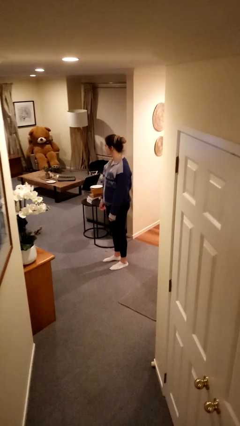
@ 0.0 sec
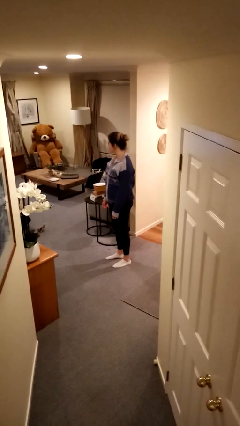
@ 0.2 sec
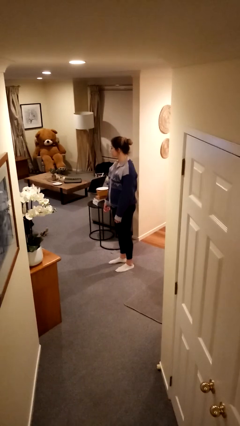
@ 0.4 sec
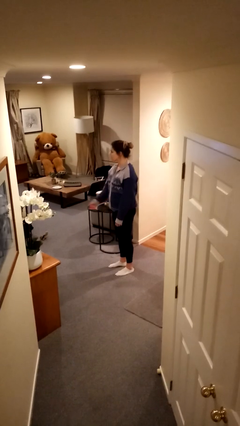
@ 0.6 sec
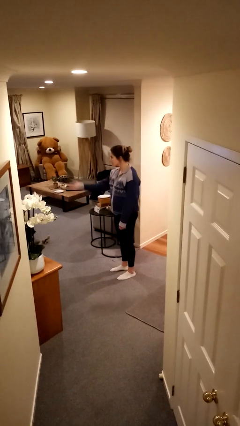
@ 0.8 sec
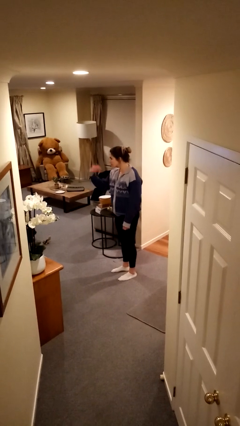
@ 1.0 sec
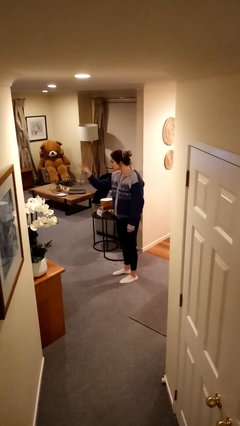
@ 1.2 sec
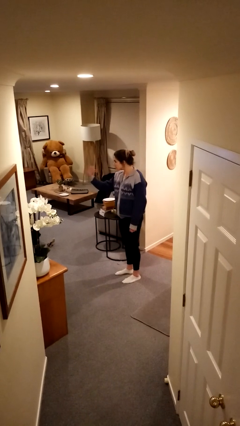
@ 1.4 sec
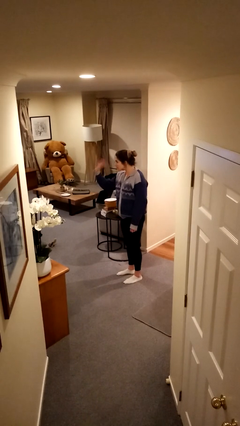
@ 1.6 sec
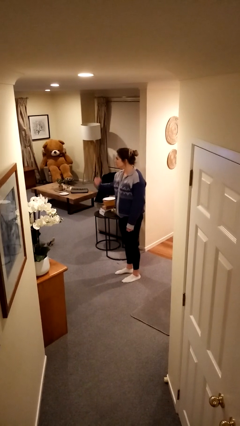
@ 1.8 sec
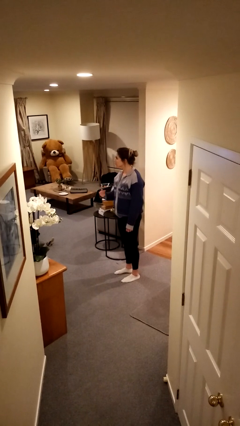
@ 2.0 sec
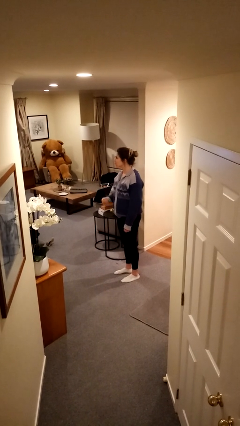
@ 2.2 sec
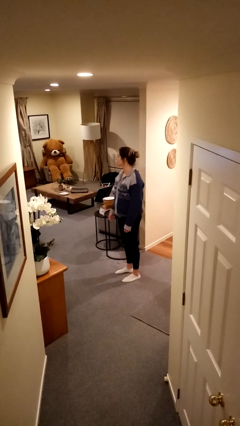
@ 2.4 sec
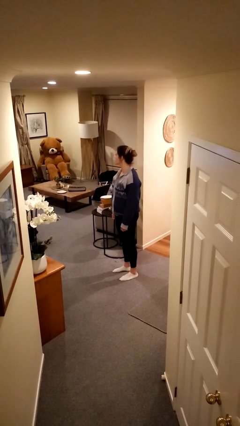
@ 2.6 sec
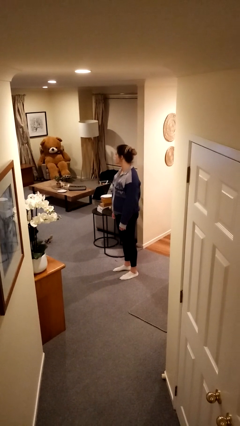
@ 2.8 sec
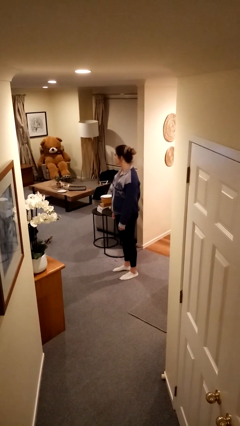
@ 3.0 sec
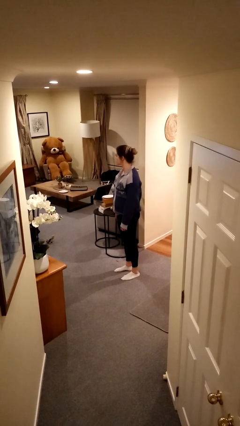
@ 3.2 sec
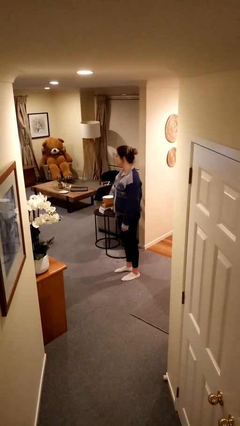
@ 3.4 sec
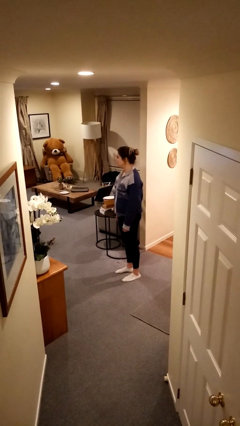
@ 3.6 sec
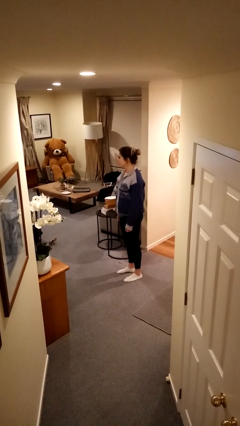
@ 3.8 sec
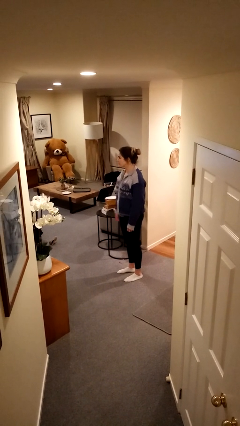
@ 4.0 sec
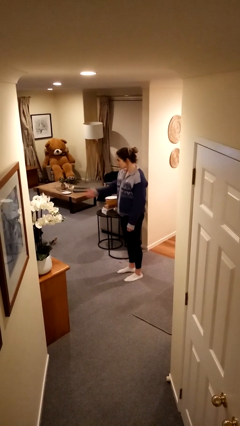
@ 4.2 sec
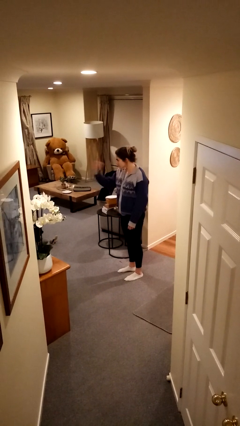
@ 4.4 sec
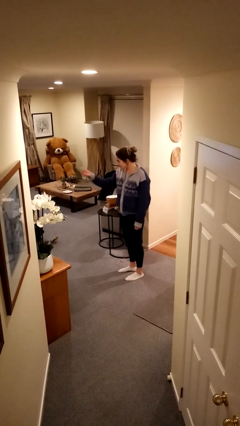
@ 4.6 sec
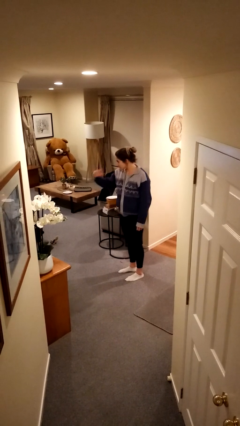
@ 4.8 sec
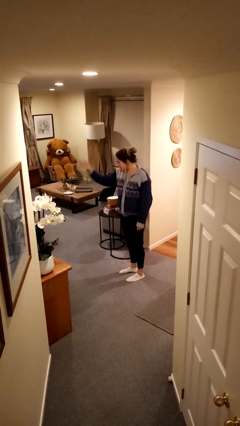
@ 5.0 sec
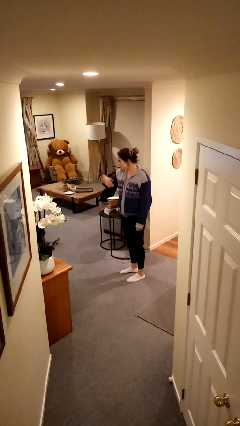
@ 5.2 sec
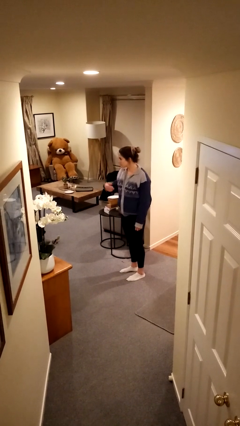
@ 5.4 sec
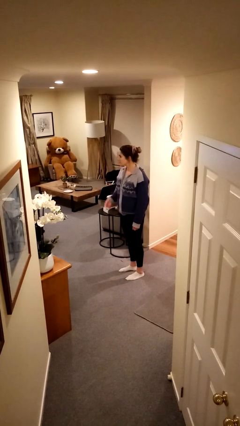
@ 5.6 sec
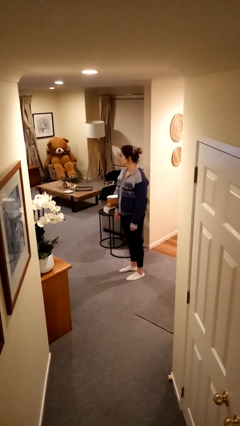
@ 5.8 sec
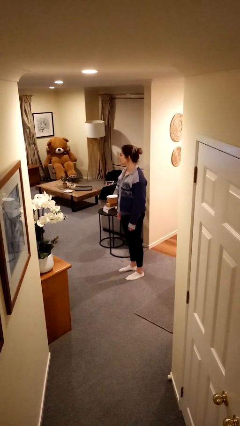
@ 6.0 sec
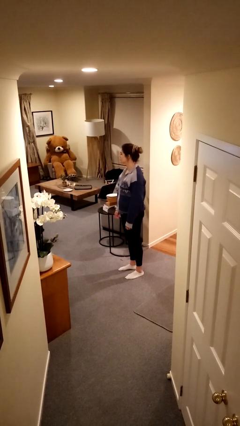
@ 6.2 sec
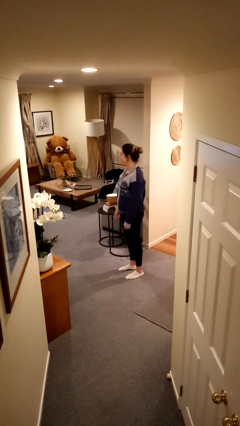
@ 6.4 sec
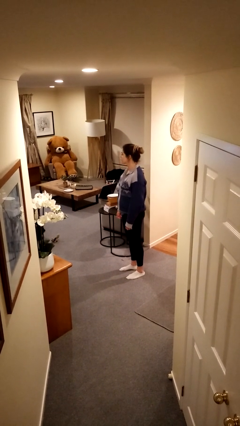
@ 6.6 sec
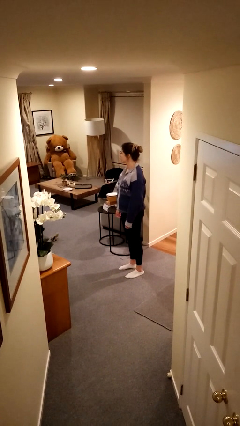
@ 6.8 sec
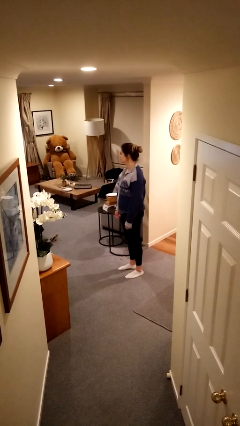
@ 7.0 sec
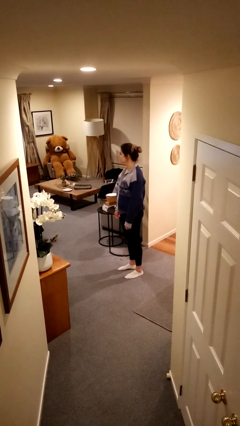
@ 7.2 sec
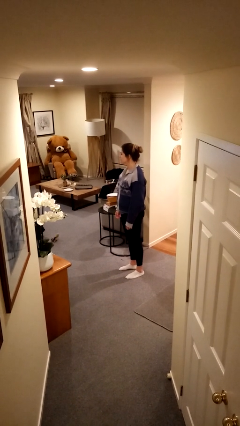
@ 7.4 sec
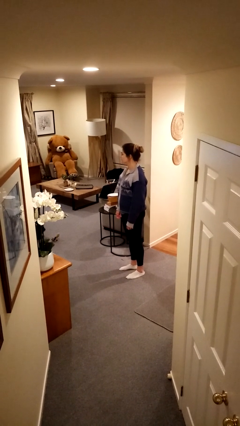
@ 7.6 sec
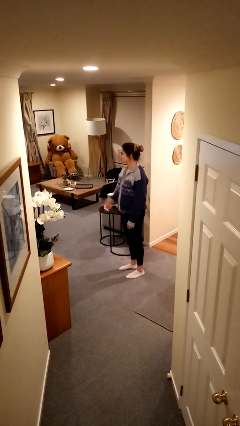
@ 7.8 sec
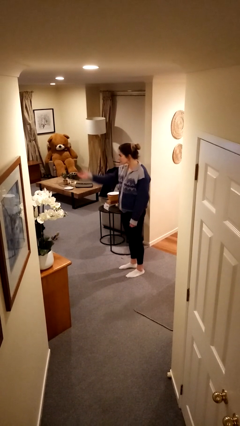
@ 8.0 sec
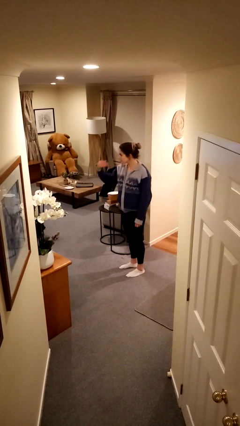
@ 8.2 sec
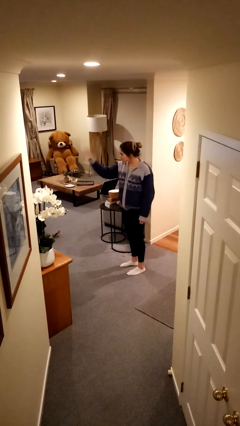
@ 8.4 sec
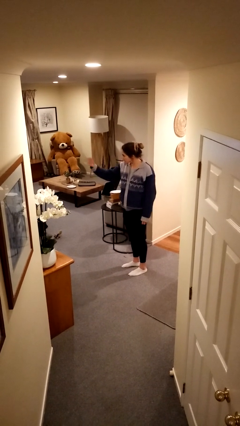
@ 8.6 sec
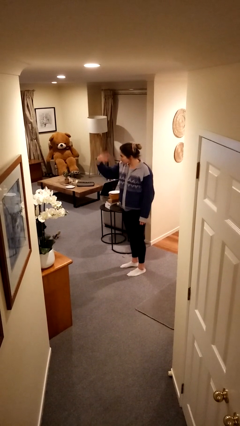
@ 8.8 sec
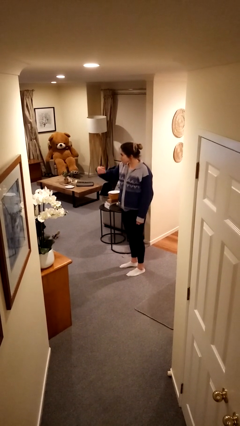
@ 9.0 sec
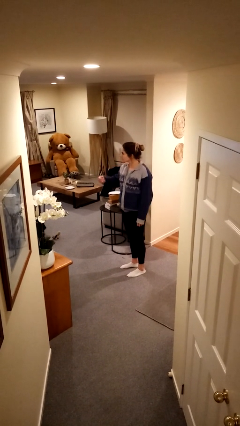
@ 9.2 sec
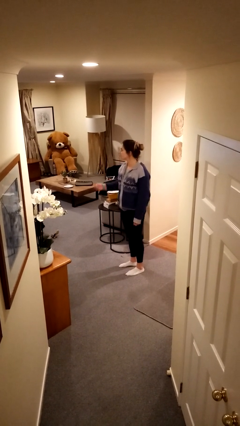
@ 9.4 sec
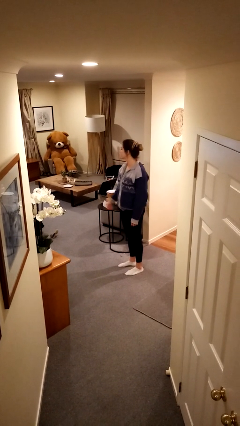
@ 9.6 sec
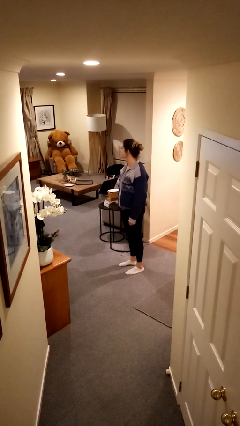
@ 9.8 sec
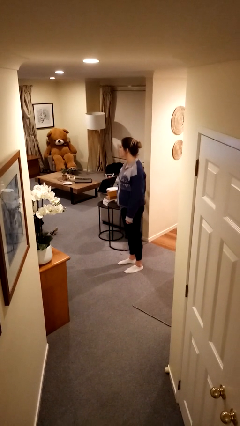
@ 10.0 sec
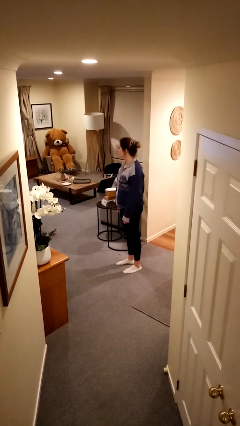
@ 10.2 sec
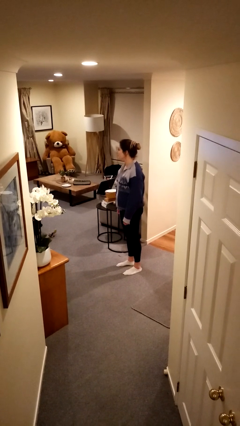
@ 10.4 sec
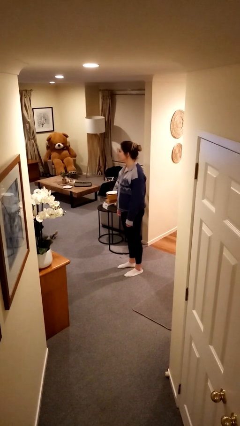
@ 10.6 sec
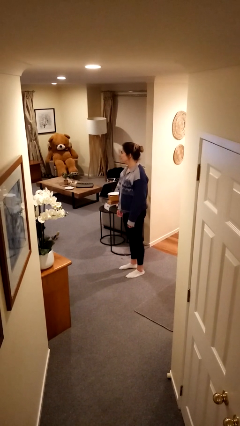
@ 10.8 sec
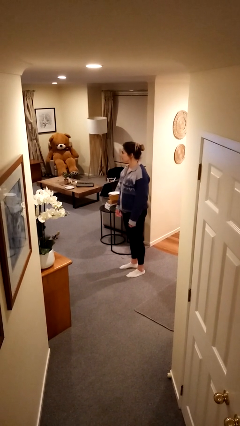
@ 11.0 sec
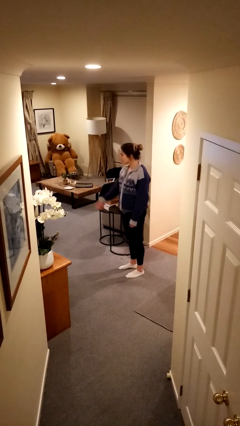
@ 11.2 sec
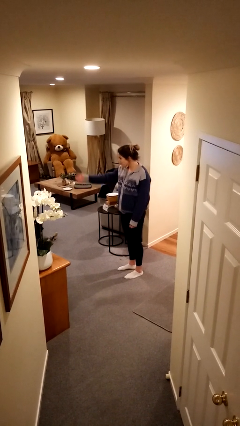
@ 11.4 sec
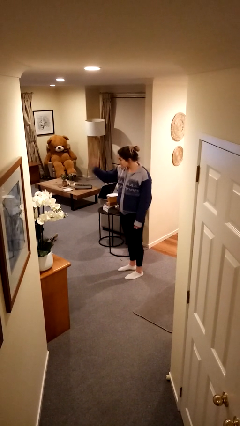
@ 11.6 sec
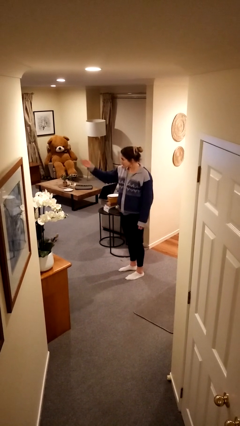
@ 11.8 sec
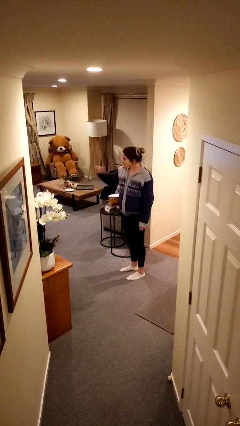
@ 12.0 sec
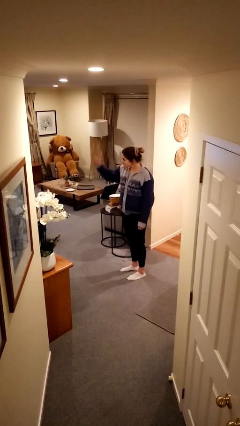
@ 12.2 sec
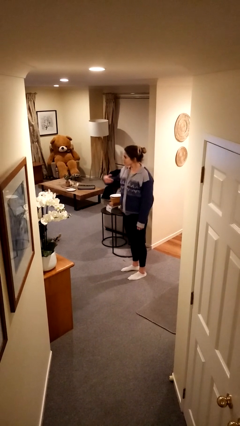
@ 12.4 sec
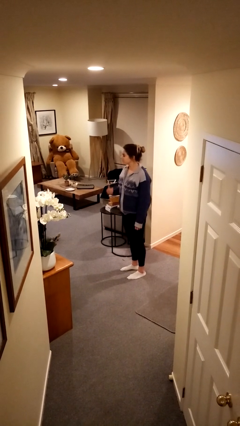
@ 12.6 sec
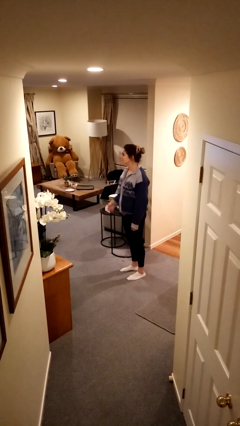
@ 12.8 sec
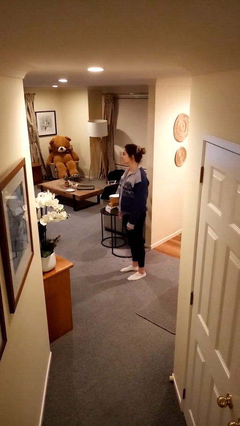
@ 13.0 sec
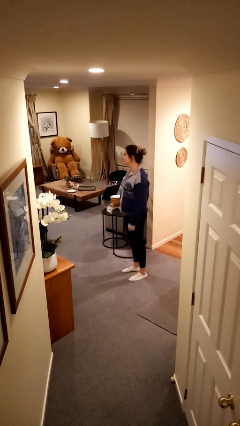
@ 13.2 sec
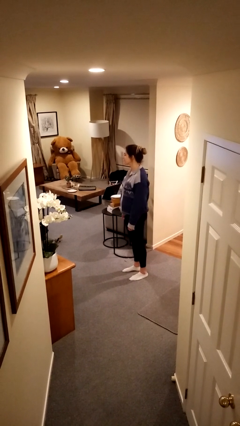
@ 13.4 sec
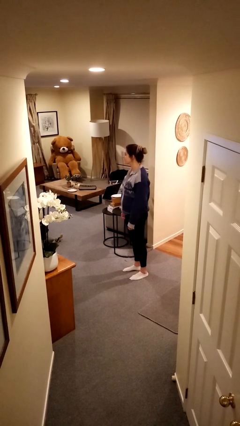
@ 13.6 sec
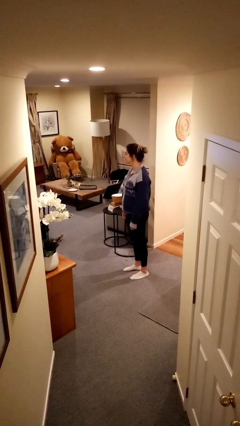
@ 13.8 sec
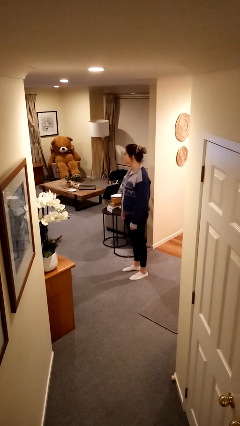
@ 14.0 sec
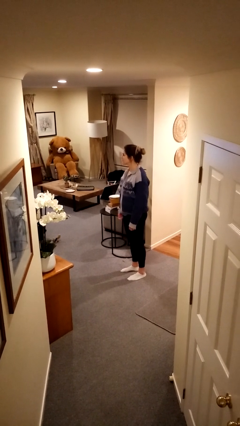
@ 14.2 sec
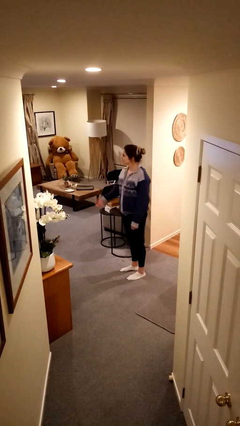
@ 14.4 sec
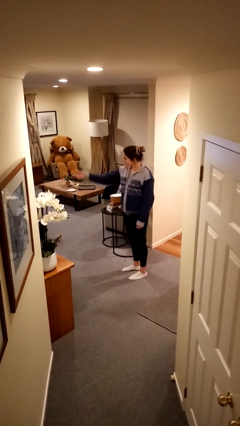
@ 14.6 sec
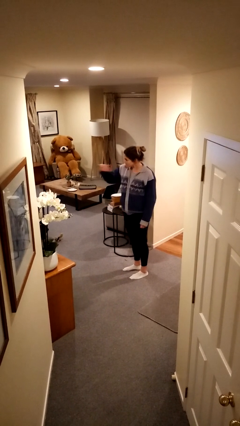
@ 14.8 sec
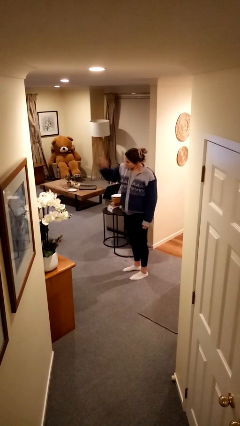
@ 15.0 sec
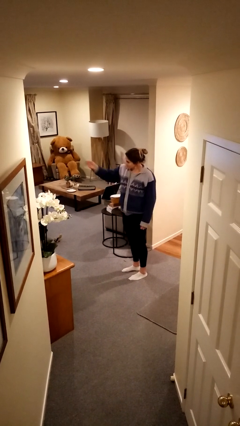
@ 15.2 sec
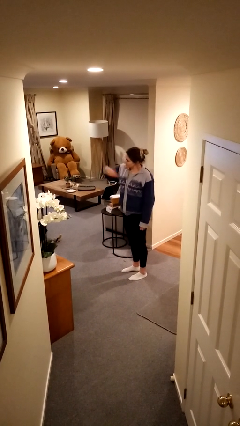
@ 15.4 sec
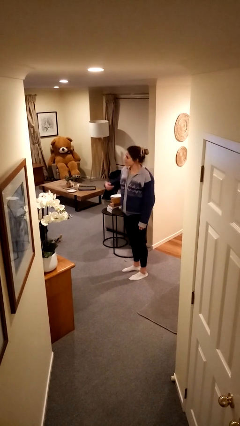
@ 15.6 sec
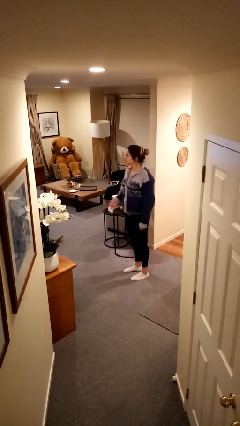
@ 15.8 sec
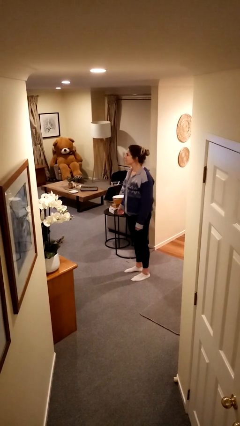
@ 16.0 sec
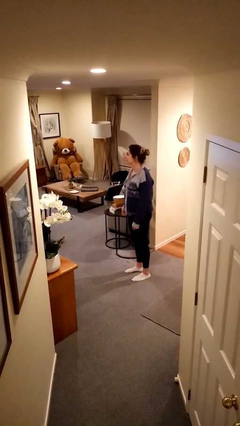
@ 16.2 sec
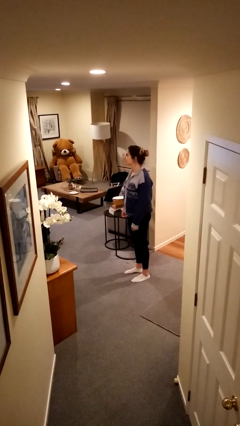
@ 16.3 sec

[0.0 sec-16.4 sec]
person gestures come here

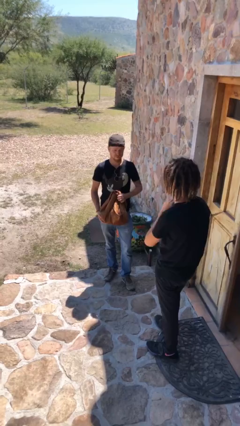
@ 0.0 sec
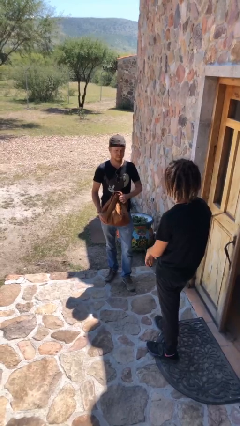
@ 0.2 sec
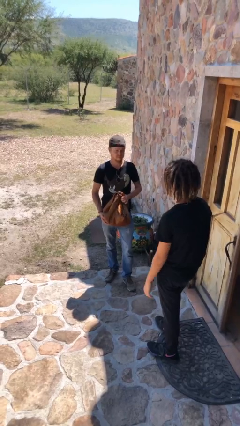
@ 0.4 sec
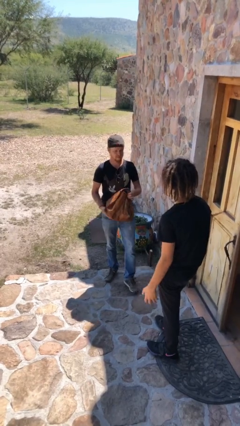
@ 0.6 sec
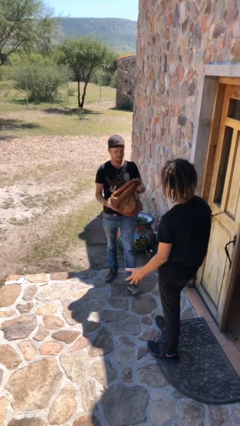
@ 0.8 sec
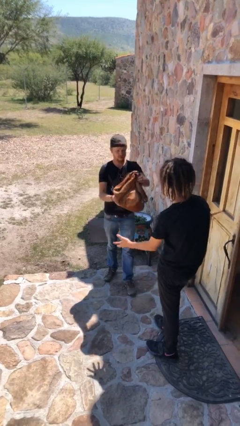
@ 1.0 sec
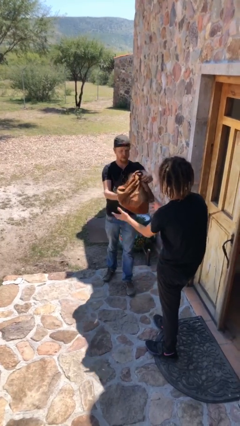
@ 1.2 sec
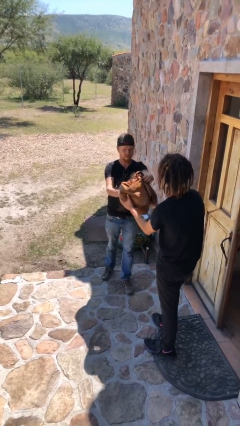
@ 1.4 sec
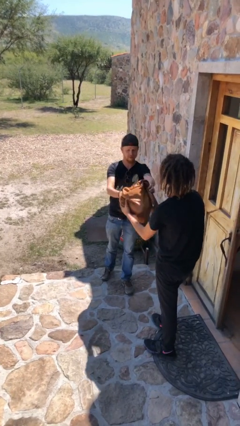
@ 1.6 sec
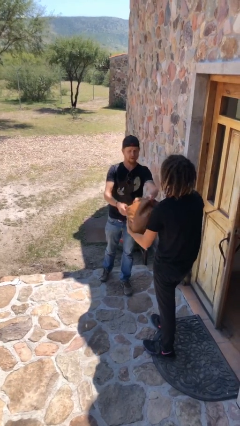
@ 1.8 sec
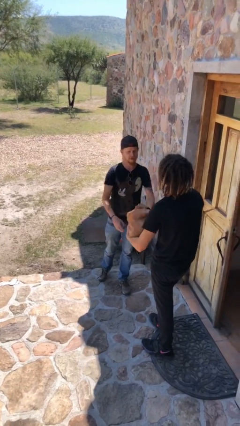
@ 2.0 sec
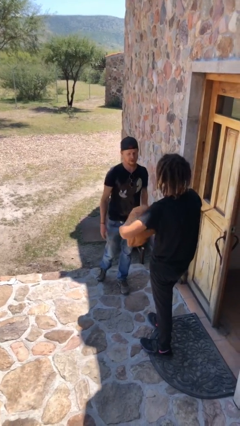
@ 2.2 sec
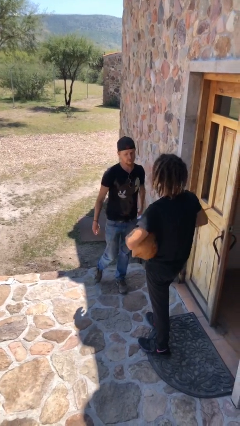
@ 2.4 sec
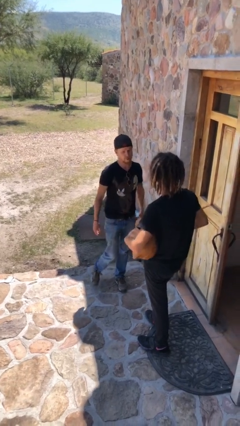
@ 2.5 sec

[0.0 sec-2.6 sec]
person transfers object to person
